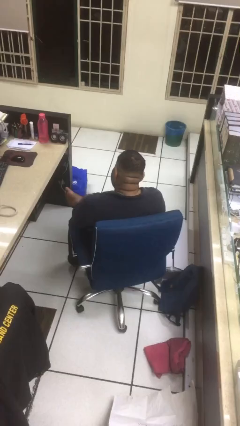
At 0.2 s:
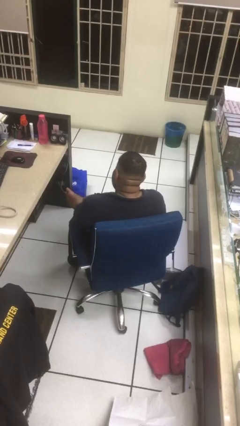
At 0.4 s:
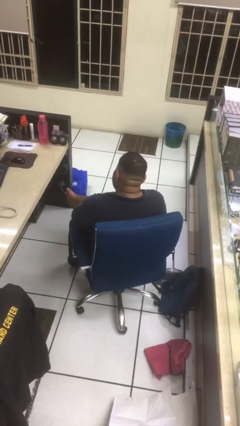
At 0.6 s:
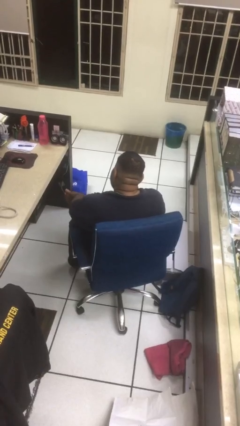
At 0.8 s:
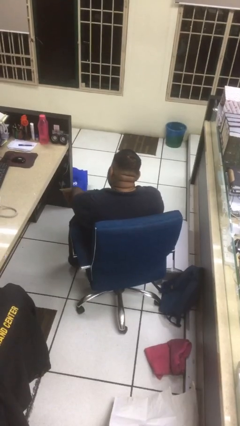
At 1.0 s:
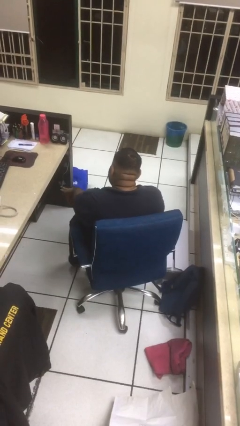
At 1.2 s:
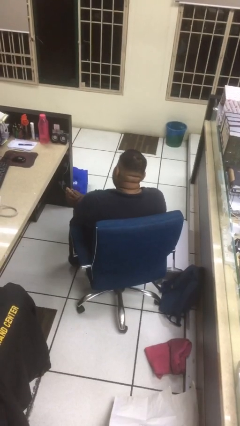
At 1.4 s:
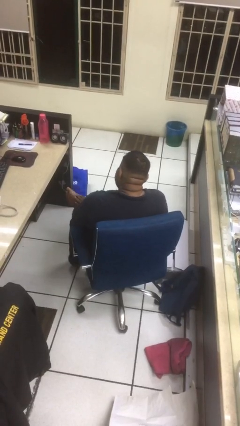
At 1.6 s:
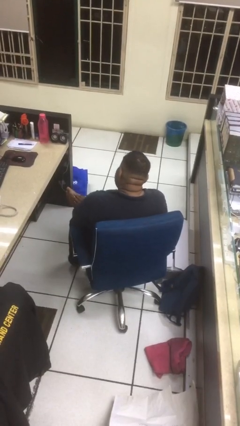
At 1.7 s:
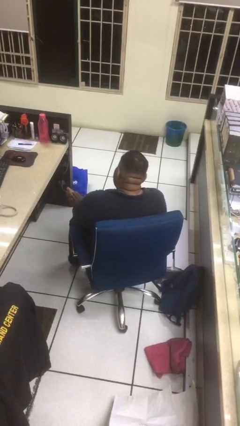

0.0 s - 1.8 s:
person rubs foot

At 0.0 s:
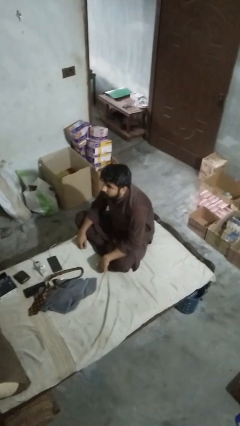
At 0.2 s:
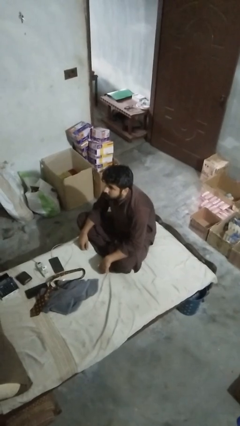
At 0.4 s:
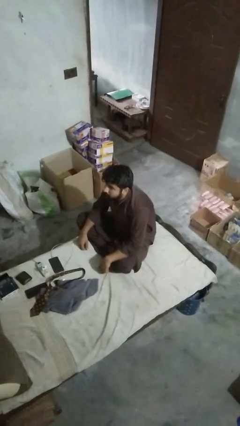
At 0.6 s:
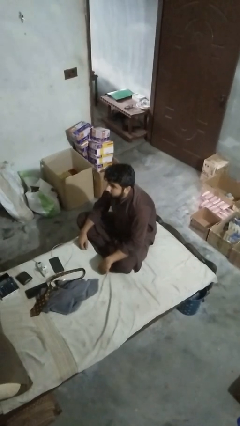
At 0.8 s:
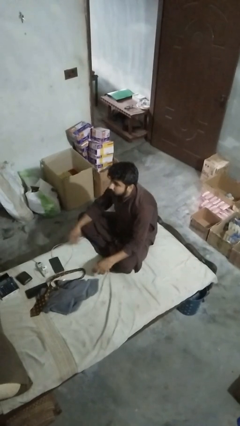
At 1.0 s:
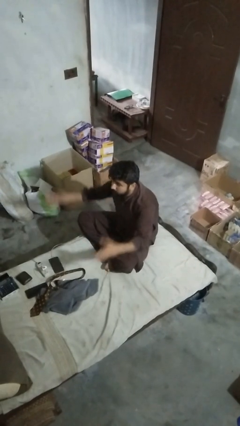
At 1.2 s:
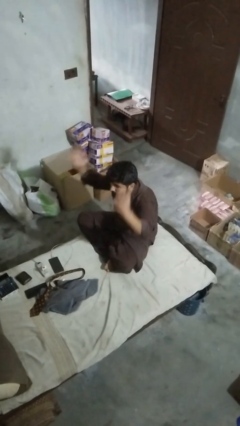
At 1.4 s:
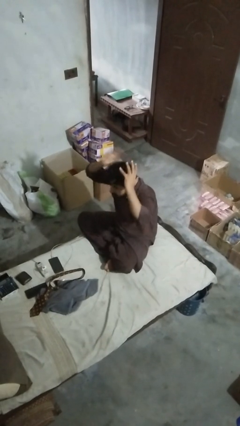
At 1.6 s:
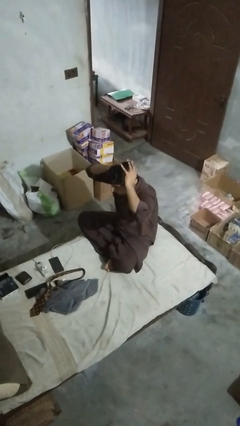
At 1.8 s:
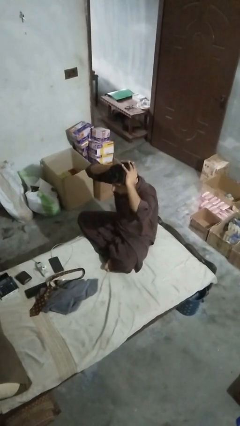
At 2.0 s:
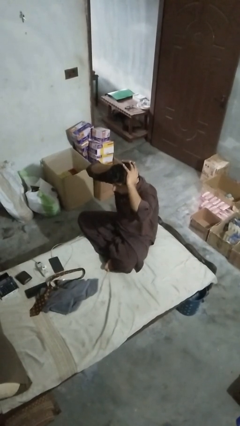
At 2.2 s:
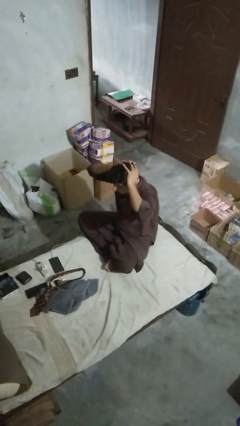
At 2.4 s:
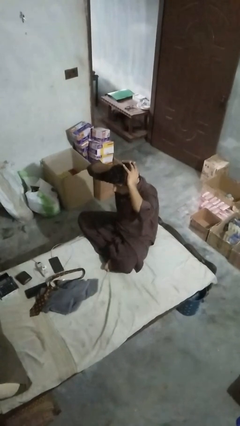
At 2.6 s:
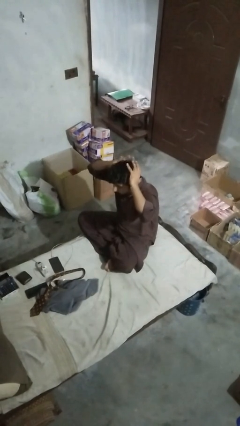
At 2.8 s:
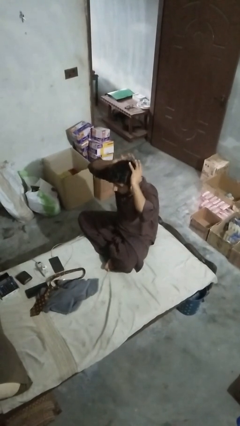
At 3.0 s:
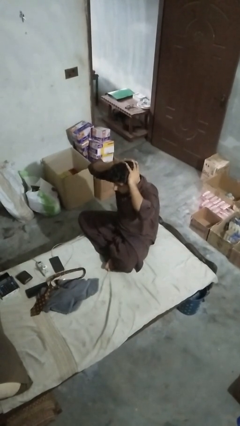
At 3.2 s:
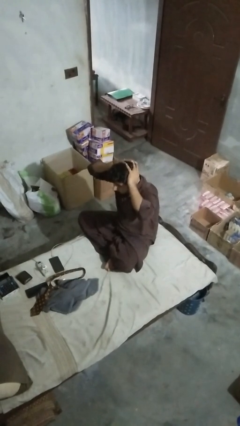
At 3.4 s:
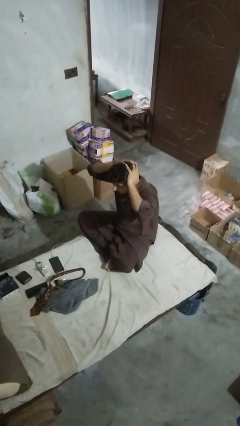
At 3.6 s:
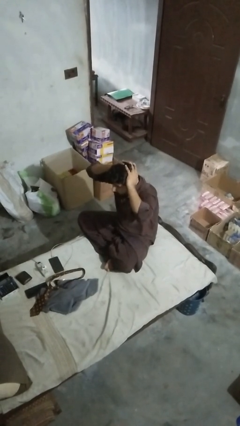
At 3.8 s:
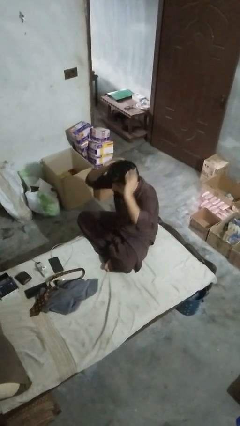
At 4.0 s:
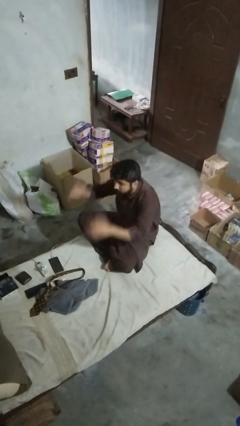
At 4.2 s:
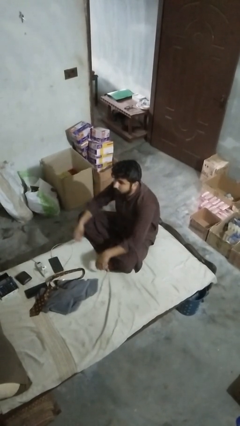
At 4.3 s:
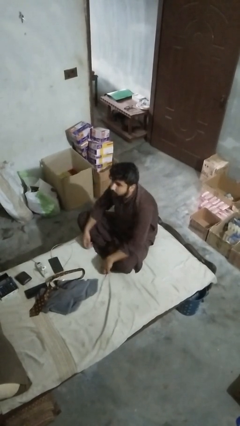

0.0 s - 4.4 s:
person pats head

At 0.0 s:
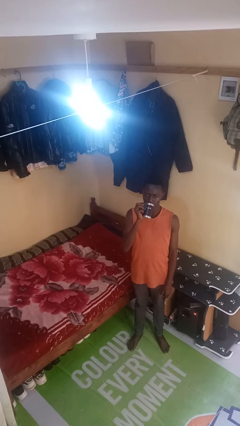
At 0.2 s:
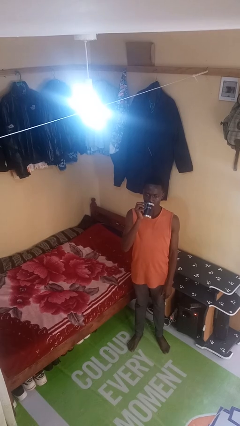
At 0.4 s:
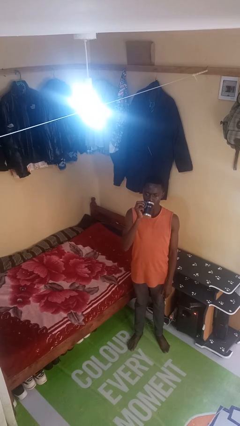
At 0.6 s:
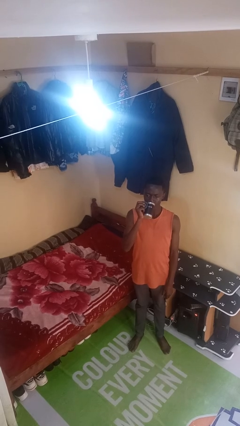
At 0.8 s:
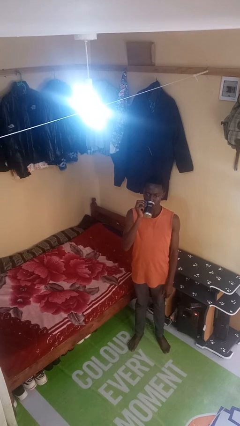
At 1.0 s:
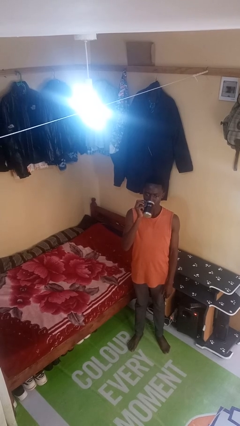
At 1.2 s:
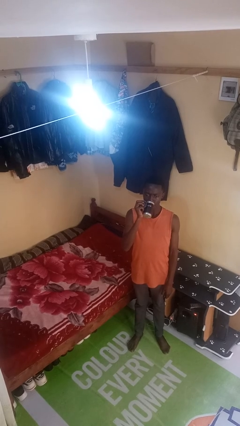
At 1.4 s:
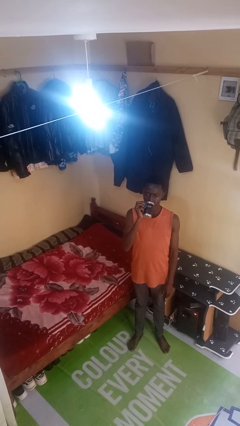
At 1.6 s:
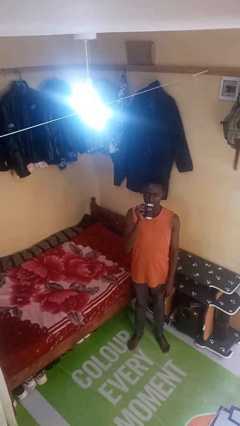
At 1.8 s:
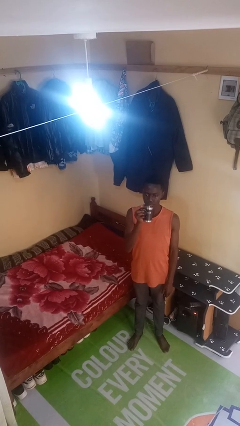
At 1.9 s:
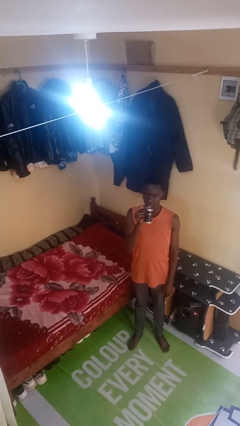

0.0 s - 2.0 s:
person drinks from beverage can

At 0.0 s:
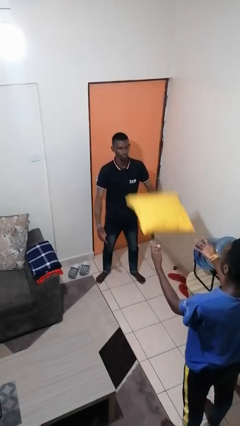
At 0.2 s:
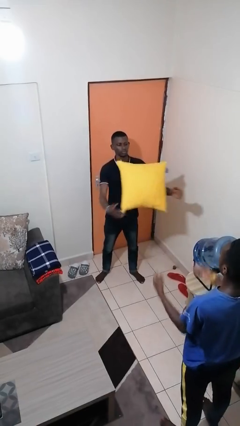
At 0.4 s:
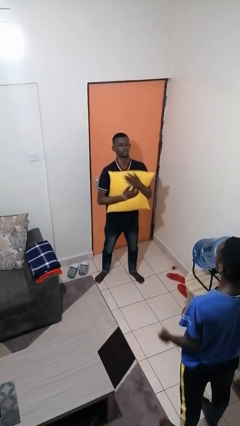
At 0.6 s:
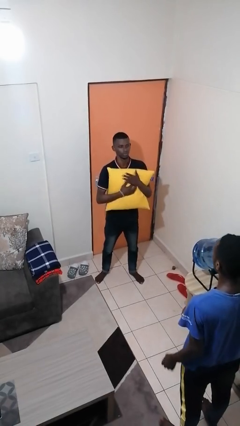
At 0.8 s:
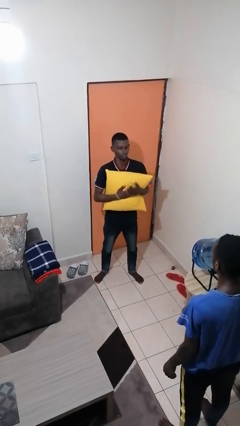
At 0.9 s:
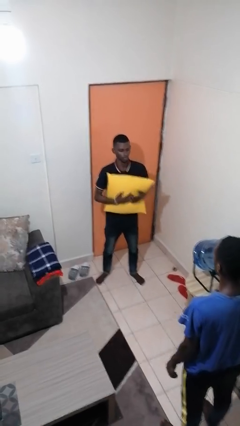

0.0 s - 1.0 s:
person catches object from person

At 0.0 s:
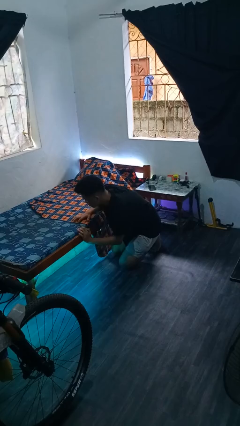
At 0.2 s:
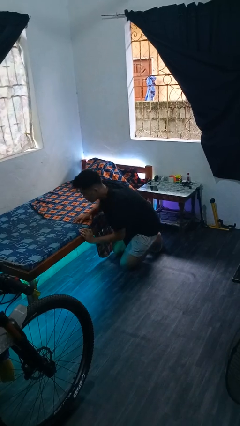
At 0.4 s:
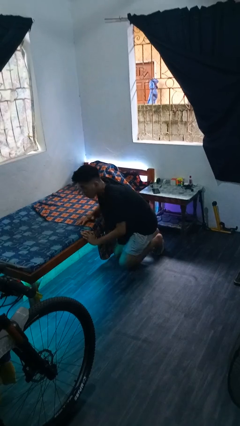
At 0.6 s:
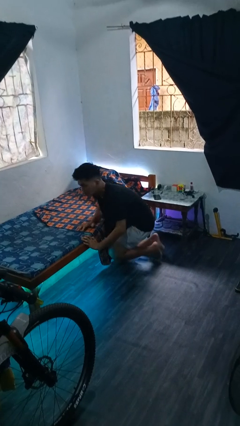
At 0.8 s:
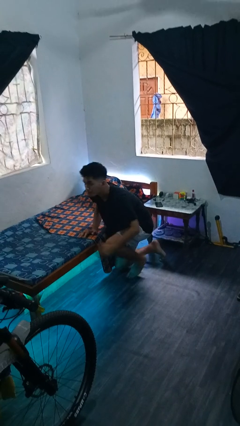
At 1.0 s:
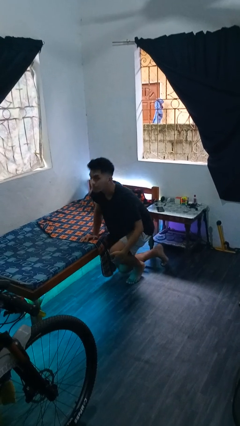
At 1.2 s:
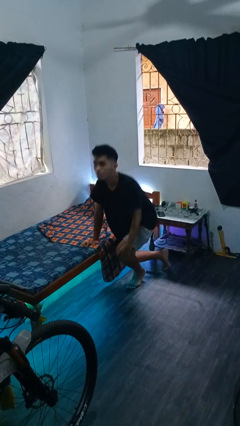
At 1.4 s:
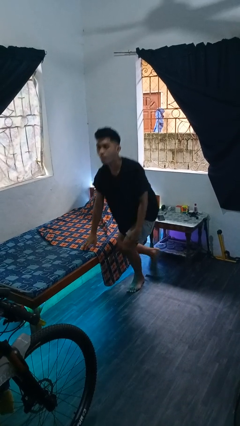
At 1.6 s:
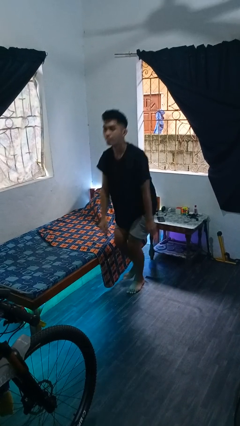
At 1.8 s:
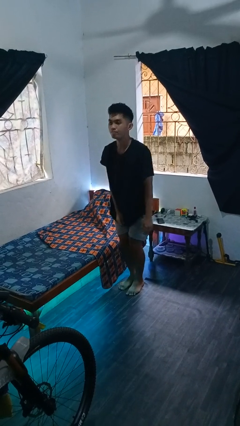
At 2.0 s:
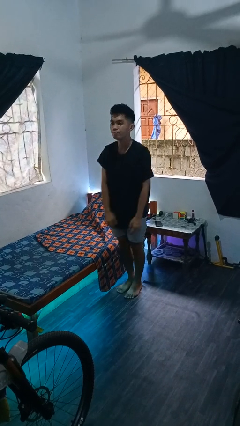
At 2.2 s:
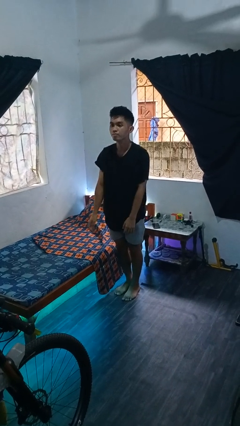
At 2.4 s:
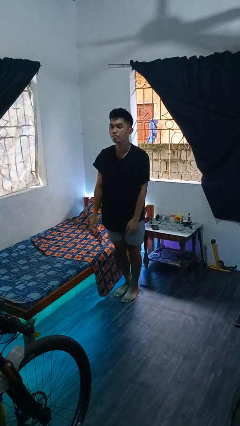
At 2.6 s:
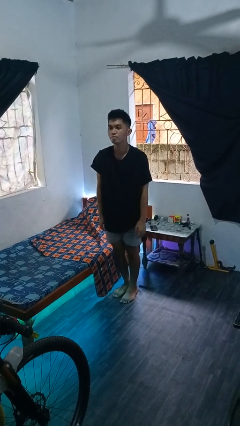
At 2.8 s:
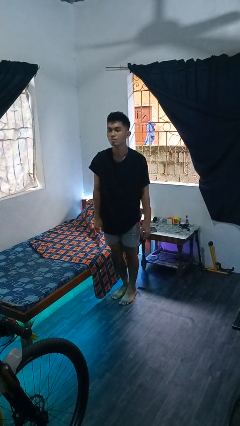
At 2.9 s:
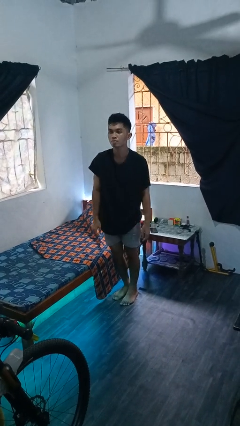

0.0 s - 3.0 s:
person stands up from floor

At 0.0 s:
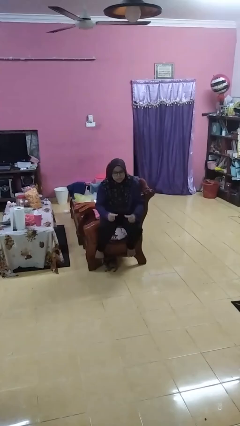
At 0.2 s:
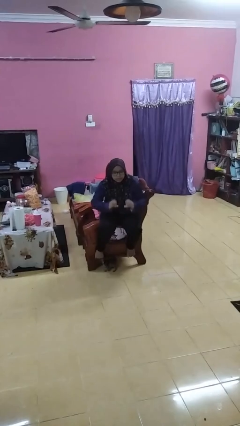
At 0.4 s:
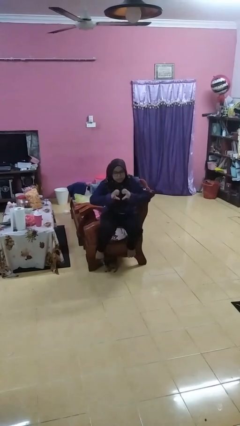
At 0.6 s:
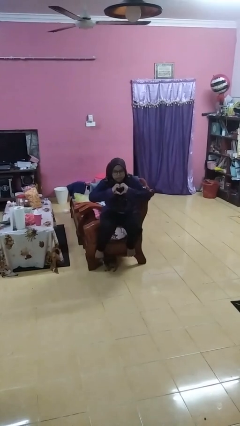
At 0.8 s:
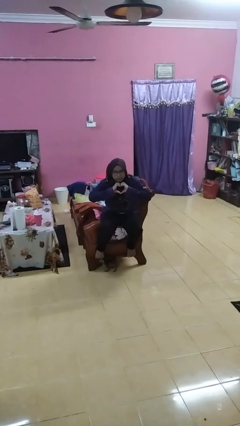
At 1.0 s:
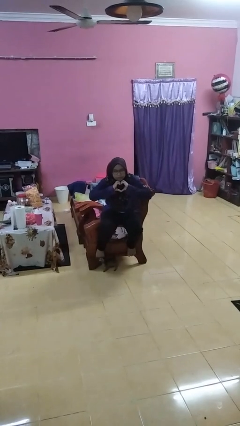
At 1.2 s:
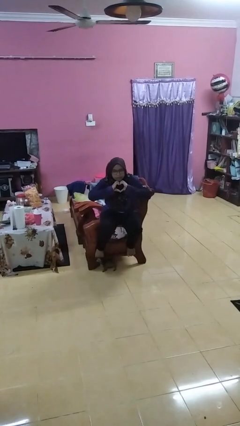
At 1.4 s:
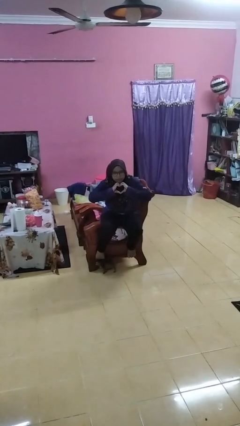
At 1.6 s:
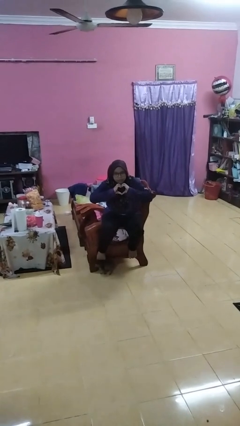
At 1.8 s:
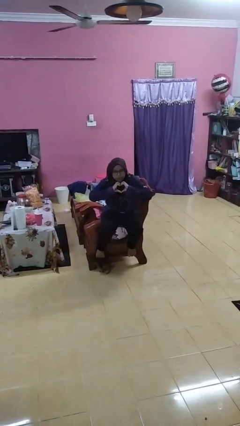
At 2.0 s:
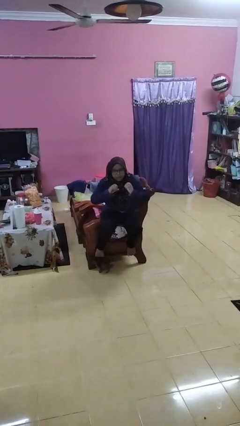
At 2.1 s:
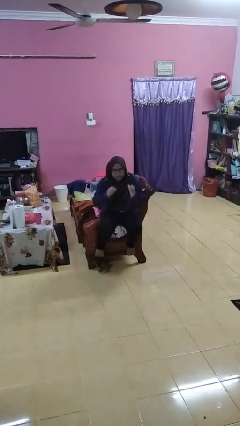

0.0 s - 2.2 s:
person gestures heart

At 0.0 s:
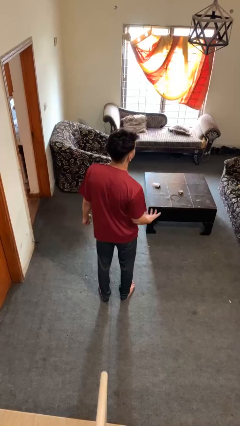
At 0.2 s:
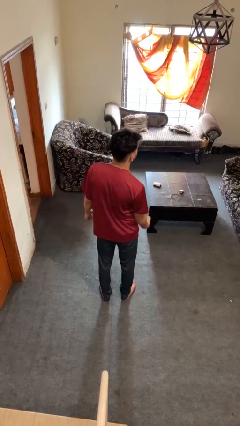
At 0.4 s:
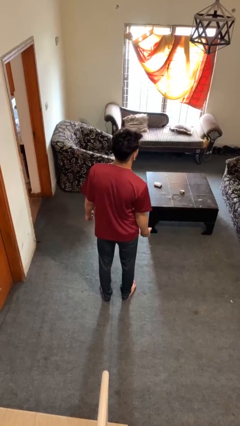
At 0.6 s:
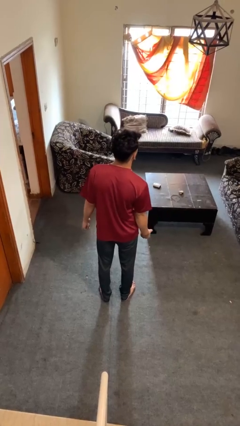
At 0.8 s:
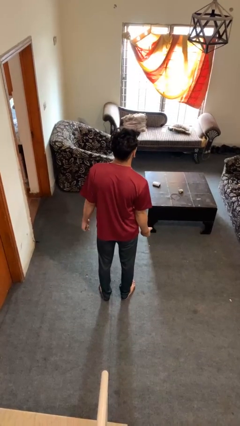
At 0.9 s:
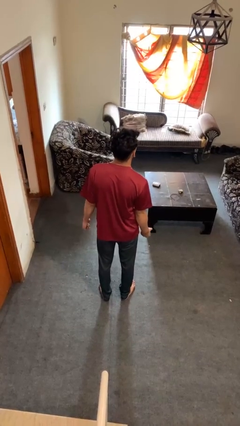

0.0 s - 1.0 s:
person catches dropped object

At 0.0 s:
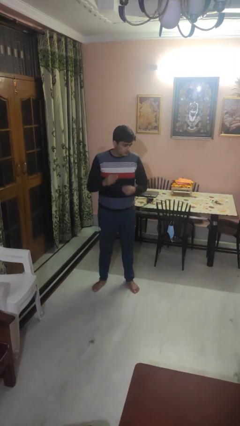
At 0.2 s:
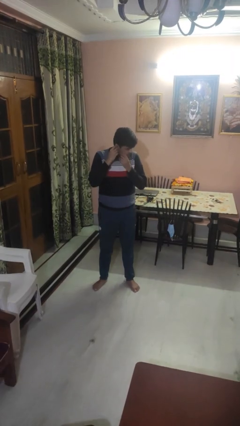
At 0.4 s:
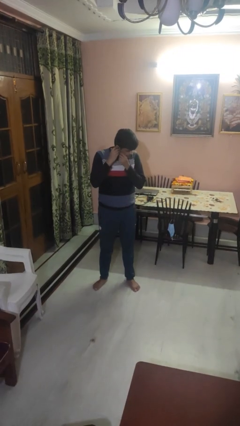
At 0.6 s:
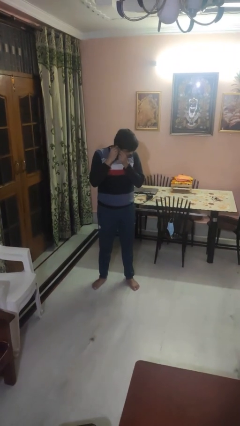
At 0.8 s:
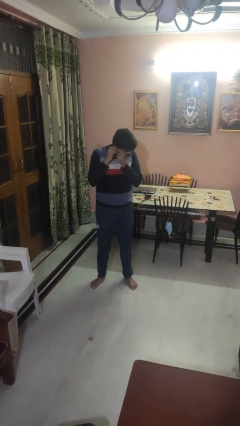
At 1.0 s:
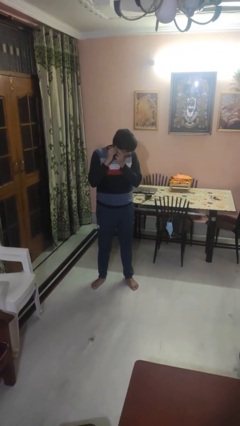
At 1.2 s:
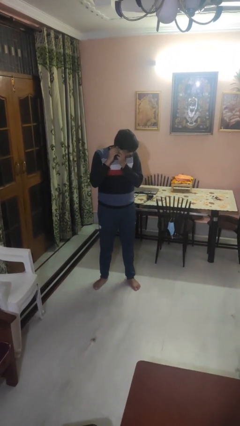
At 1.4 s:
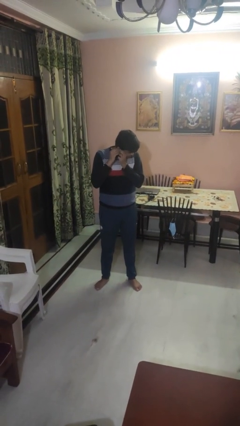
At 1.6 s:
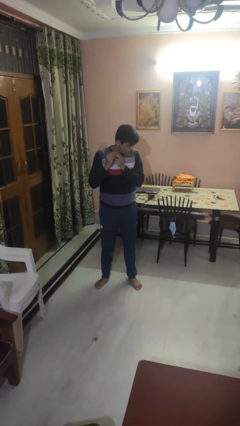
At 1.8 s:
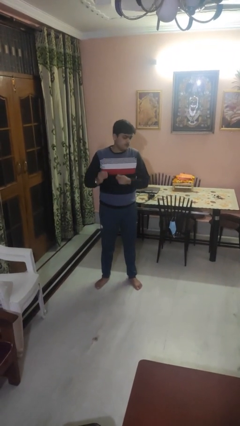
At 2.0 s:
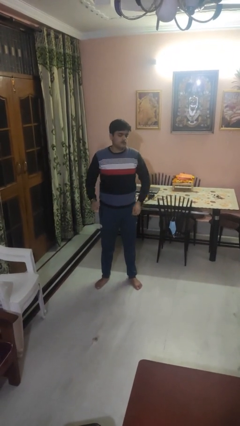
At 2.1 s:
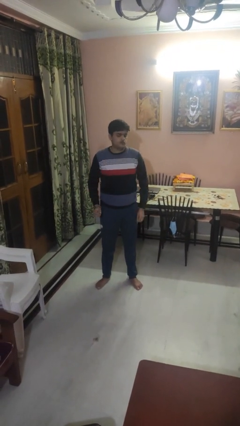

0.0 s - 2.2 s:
person takes off earrings
